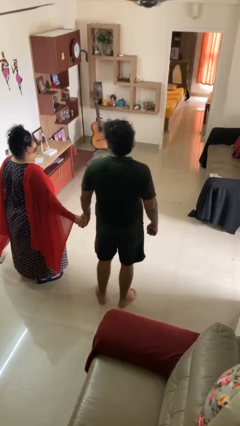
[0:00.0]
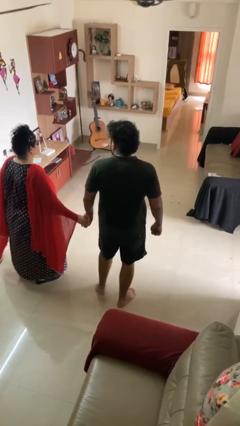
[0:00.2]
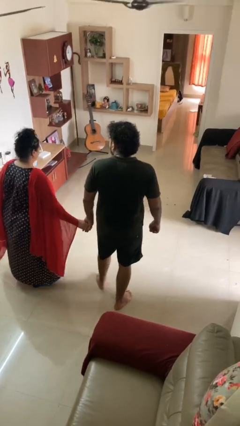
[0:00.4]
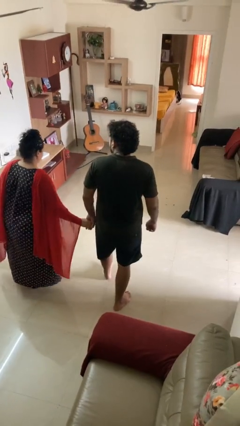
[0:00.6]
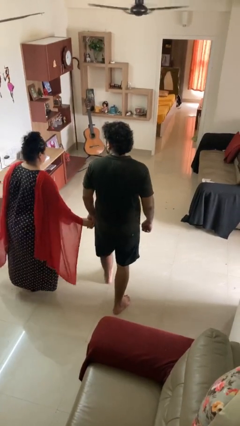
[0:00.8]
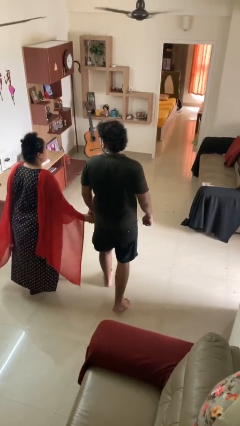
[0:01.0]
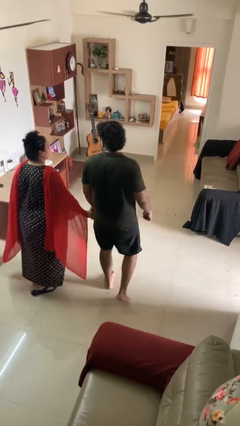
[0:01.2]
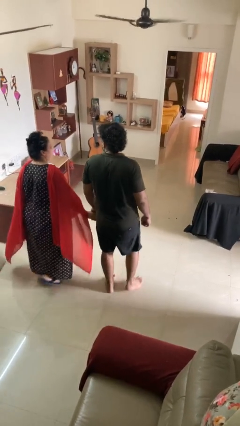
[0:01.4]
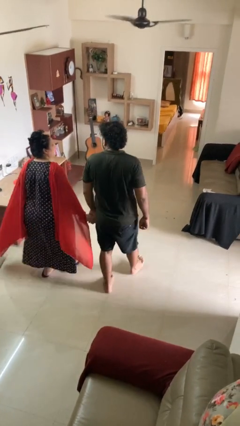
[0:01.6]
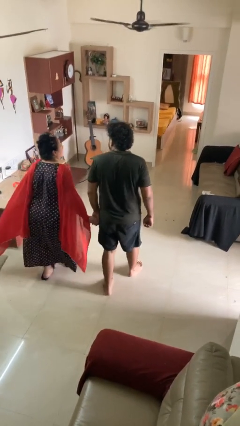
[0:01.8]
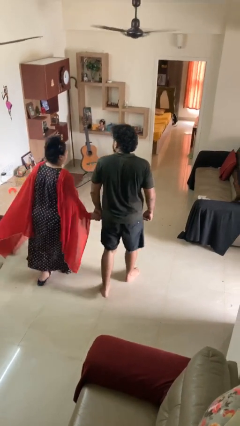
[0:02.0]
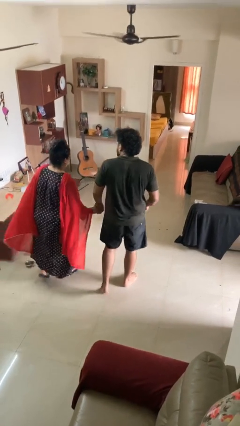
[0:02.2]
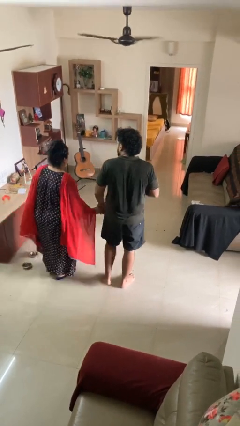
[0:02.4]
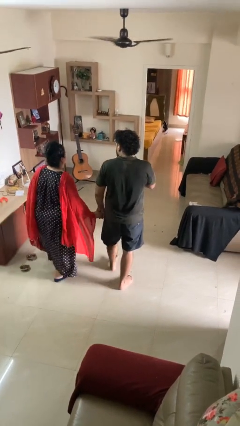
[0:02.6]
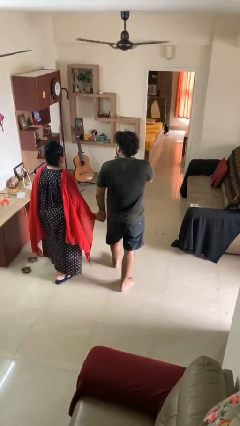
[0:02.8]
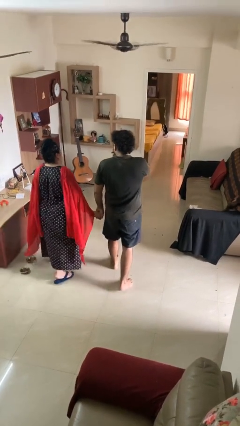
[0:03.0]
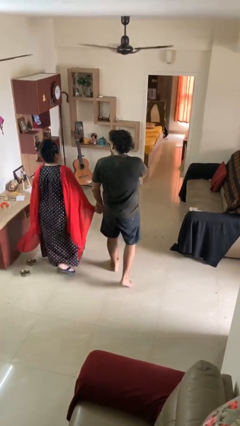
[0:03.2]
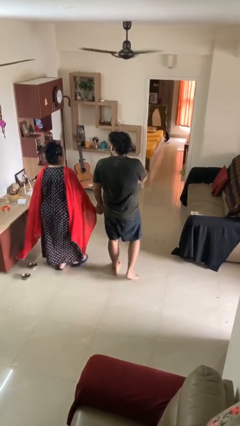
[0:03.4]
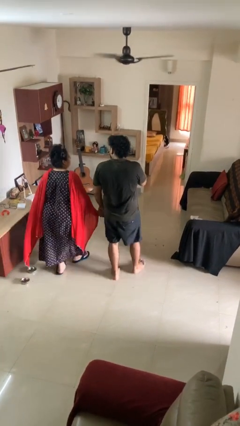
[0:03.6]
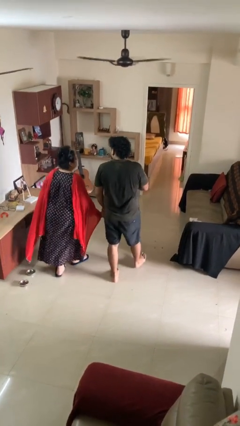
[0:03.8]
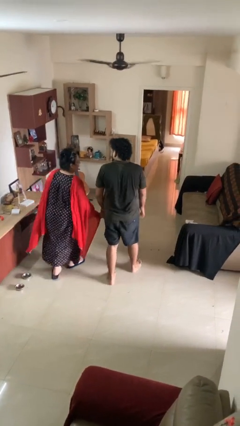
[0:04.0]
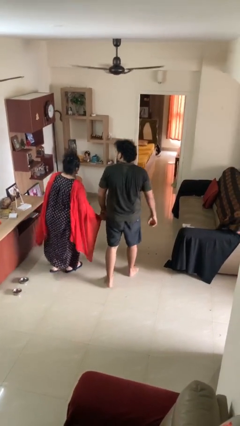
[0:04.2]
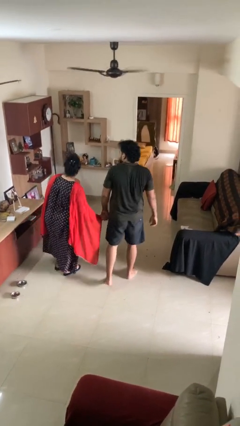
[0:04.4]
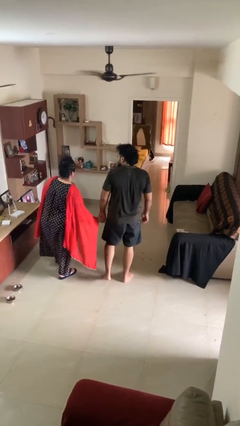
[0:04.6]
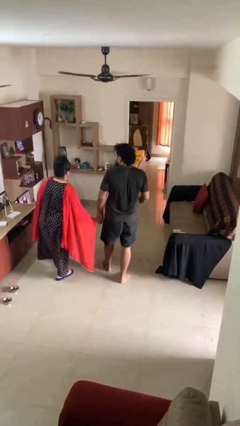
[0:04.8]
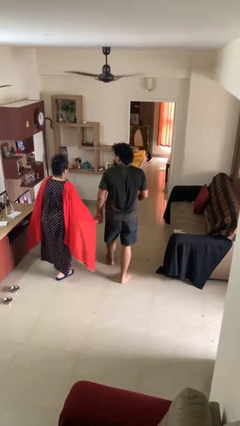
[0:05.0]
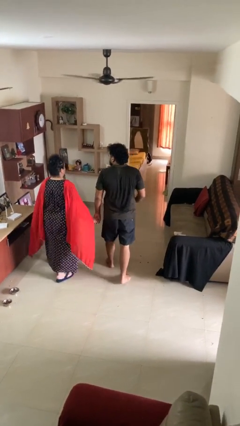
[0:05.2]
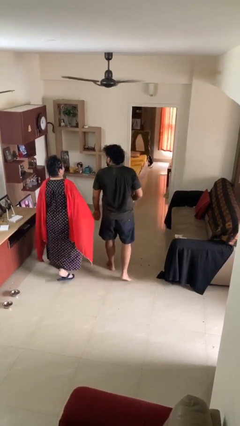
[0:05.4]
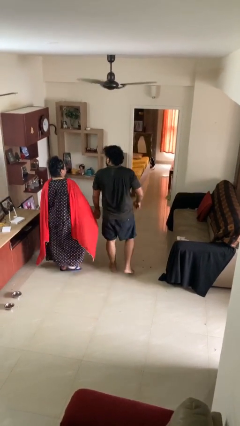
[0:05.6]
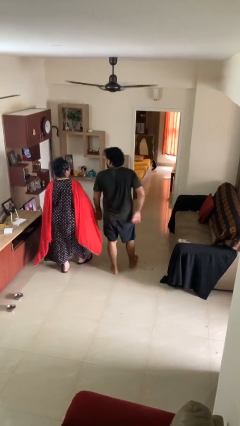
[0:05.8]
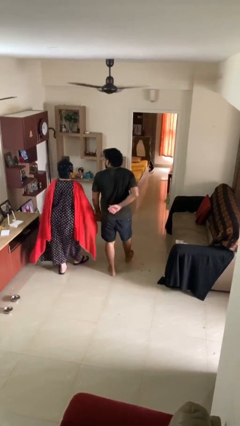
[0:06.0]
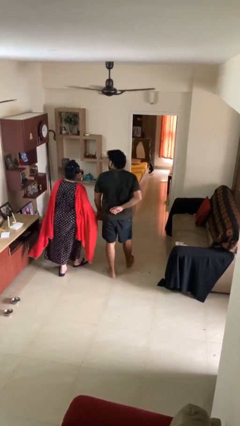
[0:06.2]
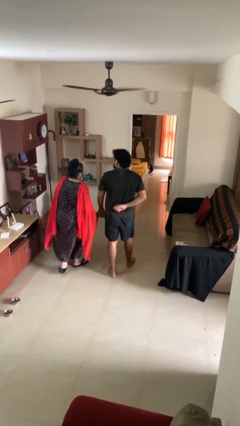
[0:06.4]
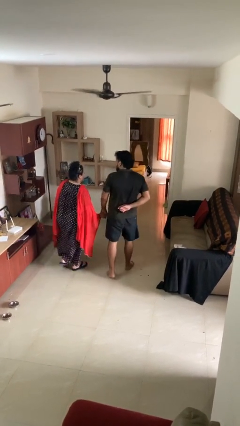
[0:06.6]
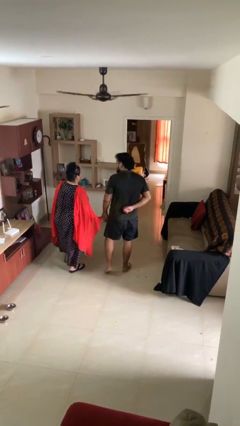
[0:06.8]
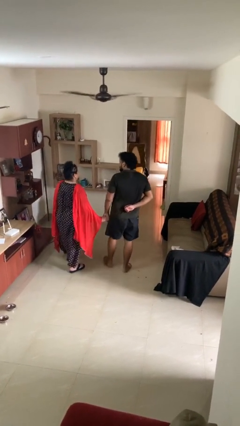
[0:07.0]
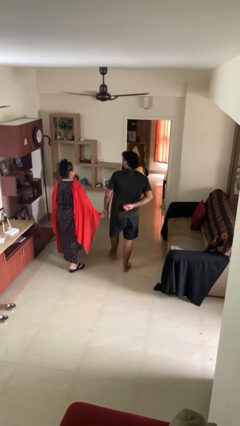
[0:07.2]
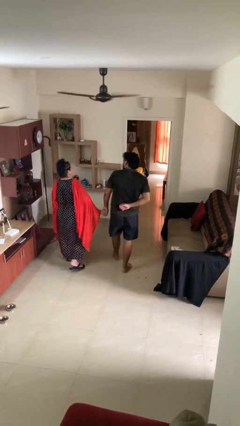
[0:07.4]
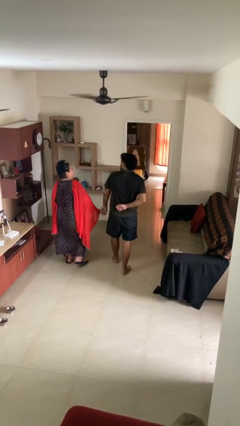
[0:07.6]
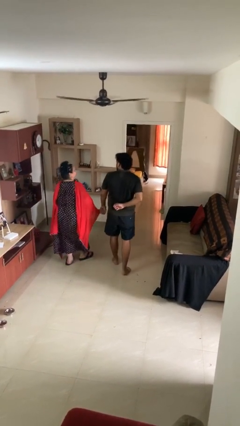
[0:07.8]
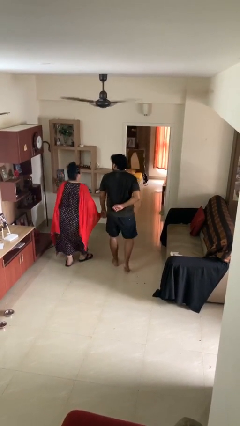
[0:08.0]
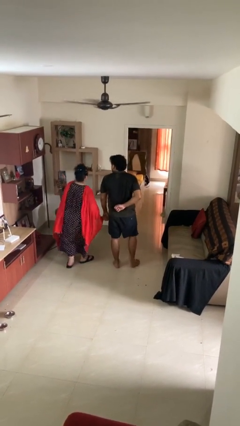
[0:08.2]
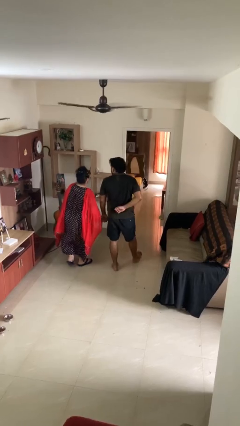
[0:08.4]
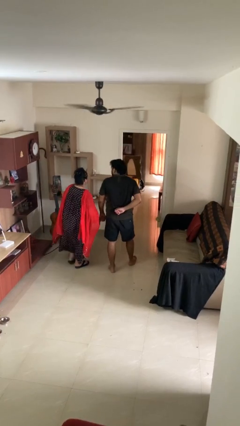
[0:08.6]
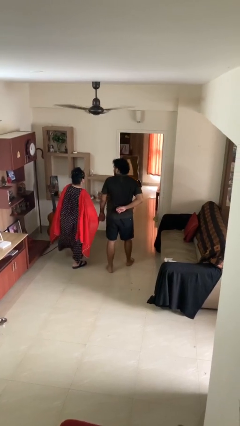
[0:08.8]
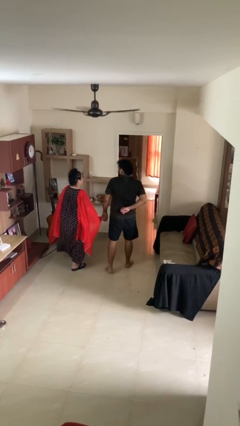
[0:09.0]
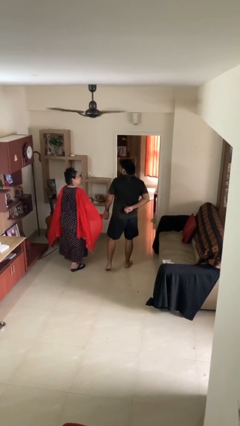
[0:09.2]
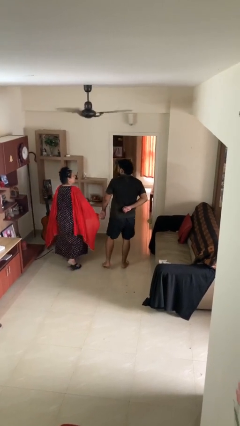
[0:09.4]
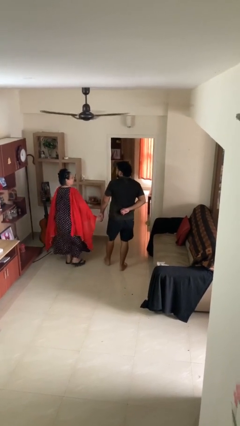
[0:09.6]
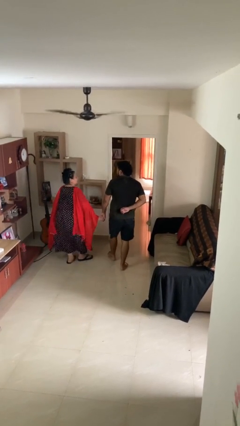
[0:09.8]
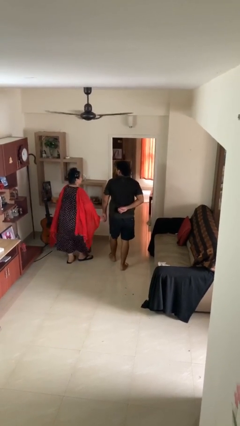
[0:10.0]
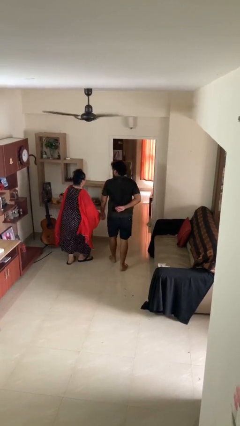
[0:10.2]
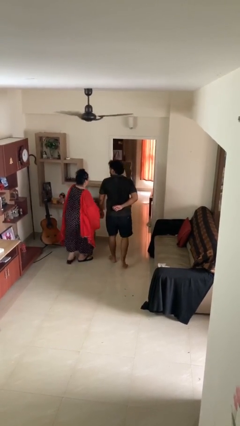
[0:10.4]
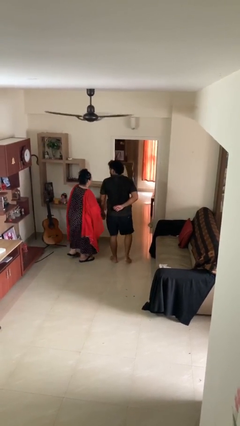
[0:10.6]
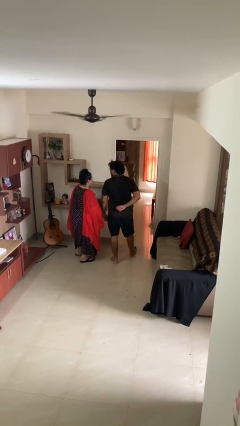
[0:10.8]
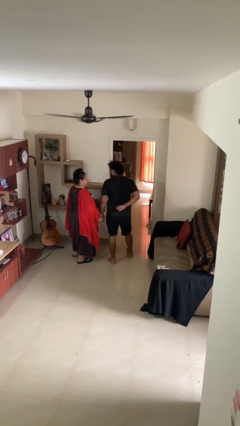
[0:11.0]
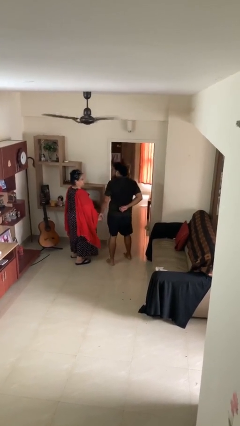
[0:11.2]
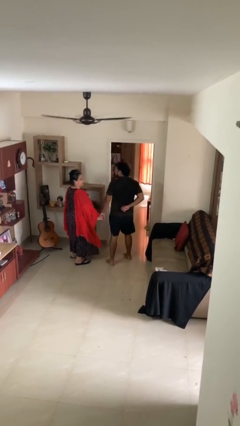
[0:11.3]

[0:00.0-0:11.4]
person holds hand

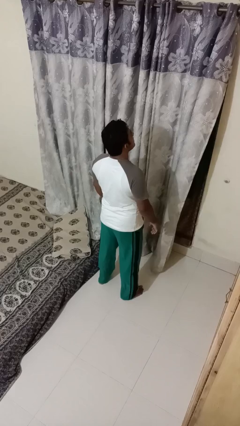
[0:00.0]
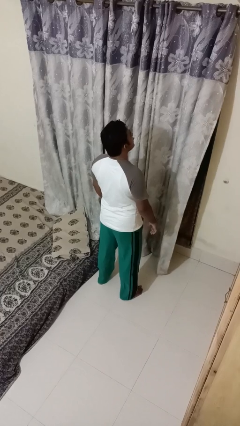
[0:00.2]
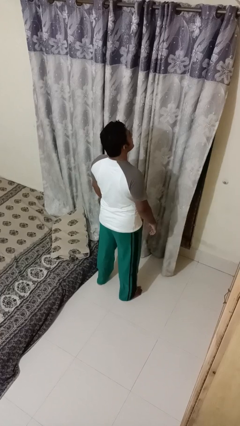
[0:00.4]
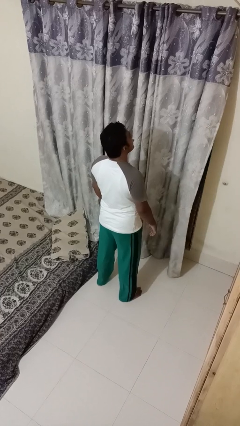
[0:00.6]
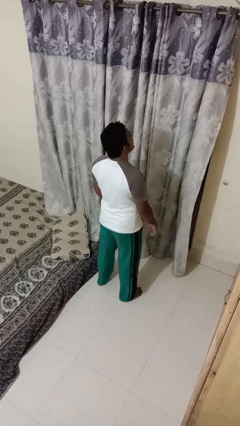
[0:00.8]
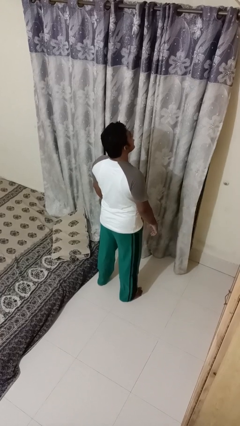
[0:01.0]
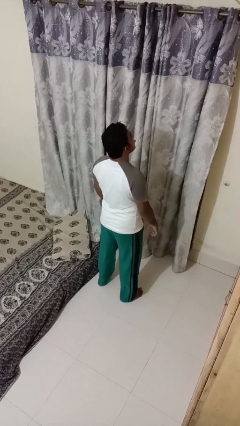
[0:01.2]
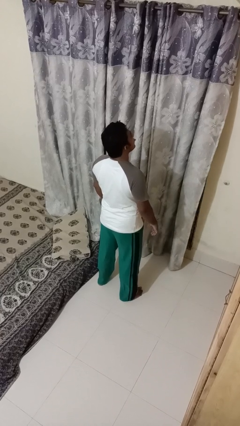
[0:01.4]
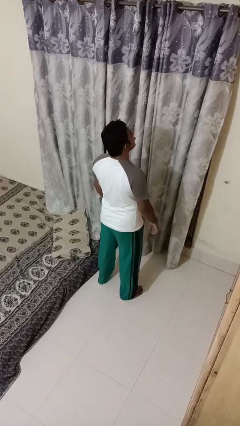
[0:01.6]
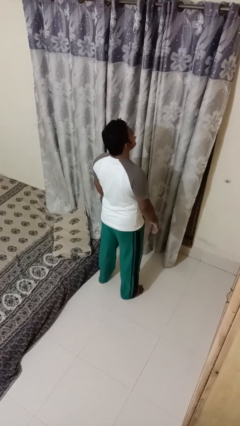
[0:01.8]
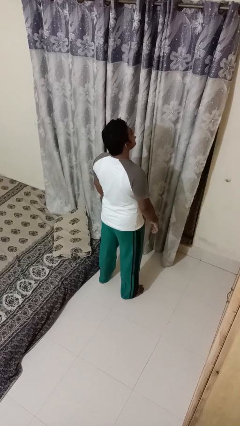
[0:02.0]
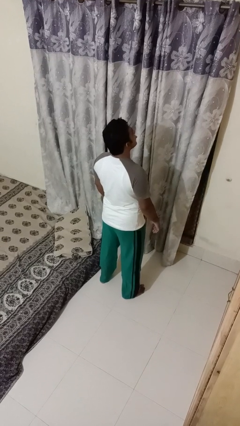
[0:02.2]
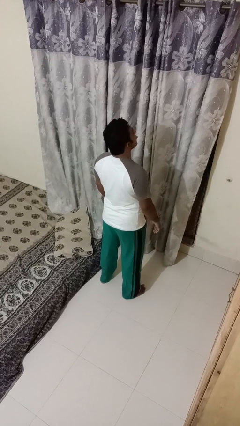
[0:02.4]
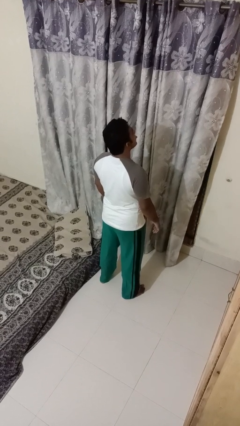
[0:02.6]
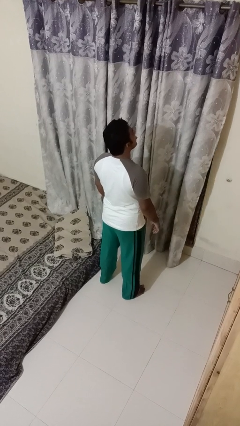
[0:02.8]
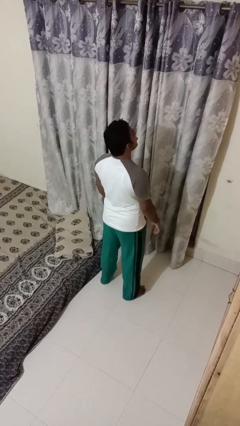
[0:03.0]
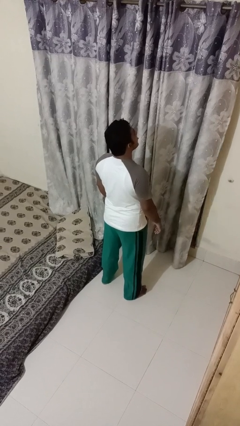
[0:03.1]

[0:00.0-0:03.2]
person sticks out tongue

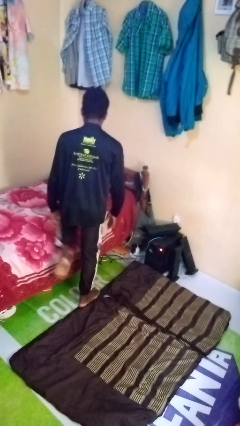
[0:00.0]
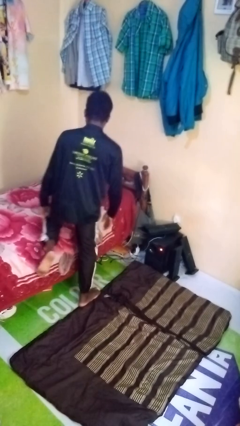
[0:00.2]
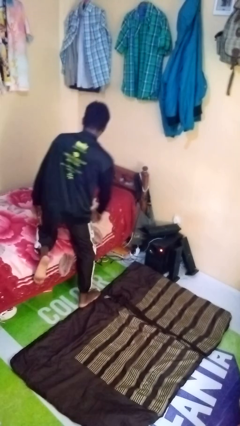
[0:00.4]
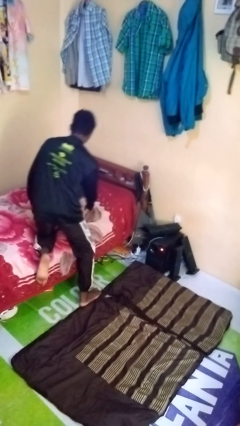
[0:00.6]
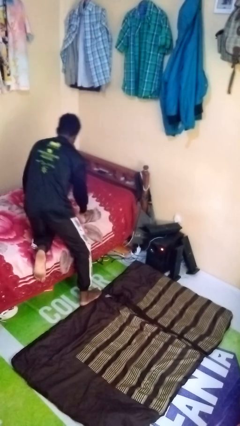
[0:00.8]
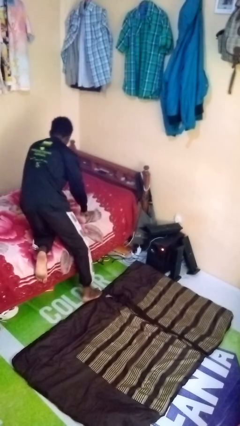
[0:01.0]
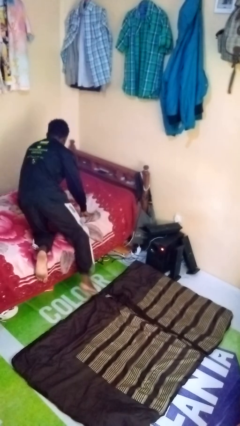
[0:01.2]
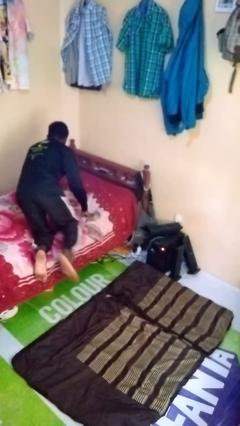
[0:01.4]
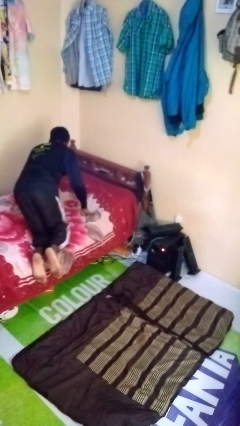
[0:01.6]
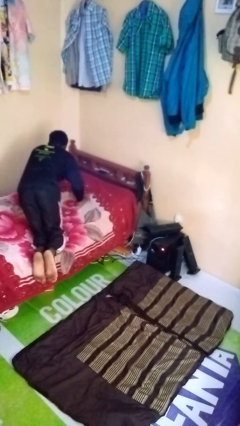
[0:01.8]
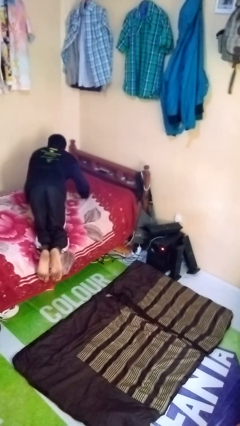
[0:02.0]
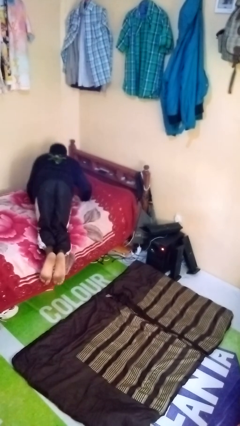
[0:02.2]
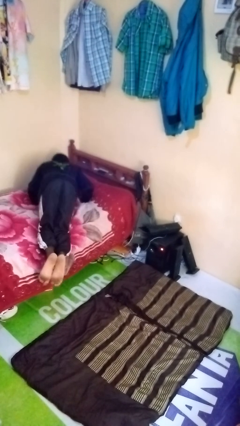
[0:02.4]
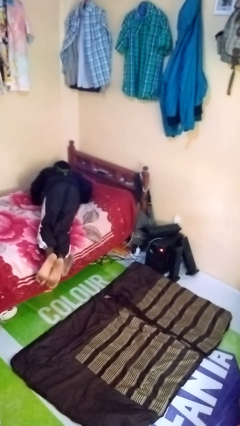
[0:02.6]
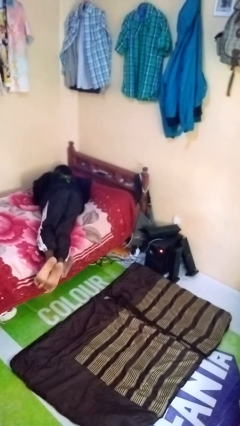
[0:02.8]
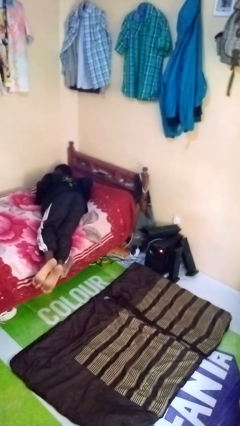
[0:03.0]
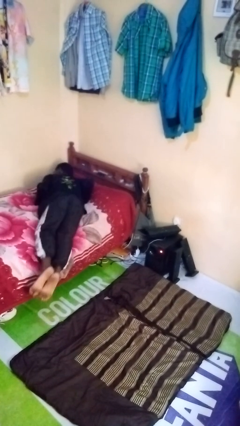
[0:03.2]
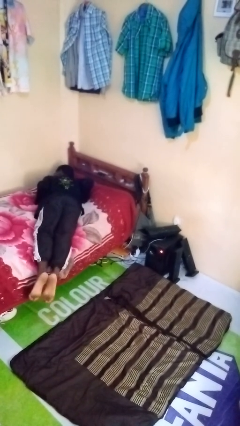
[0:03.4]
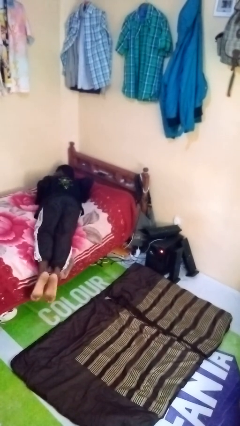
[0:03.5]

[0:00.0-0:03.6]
person lies down on bed
